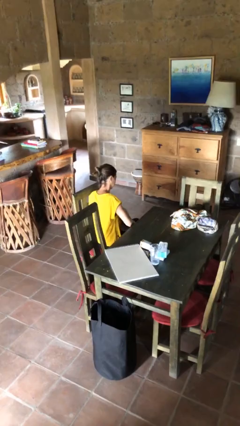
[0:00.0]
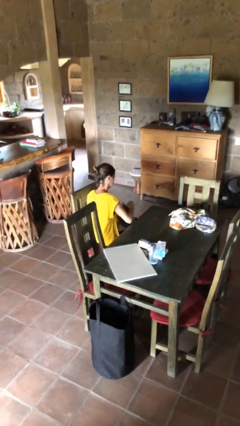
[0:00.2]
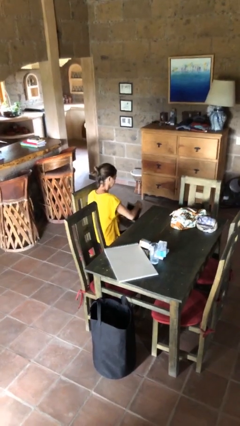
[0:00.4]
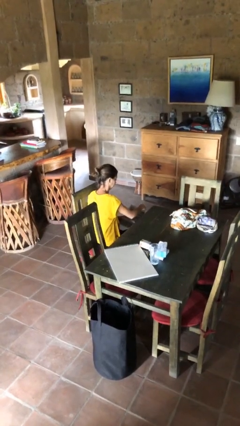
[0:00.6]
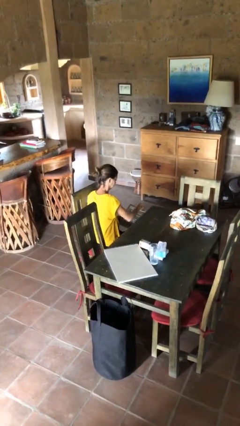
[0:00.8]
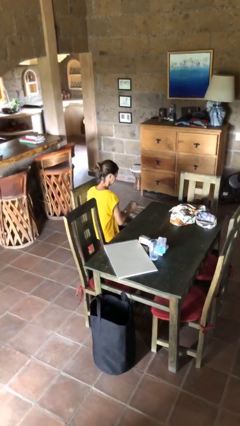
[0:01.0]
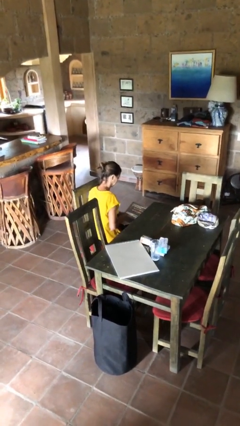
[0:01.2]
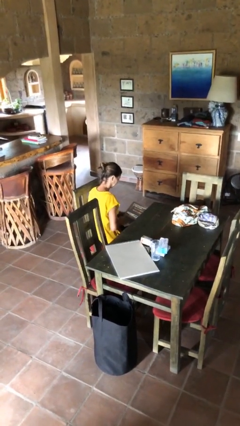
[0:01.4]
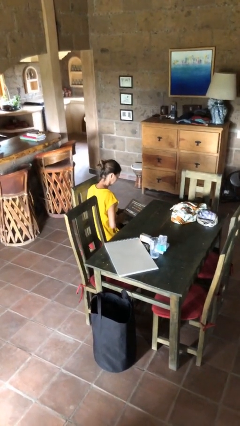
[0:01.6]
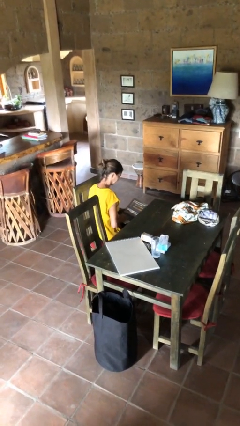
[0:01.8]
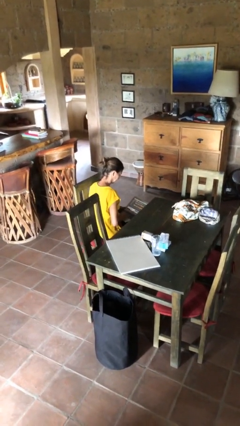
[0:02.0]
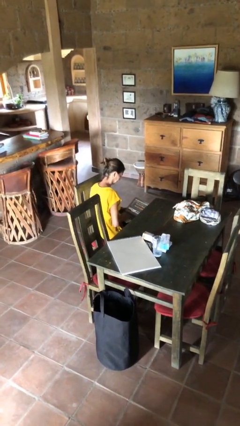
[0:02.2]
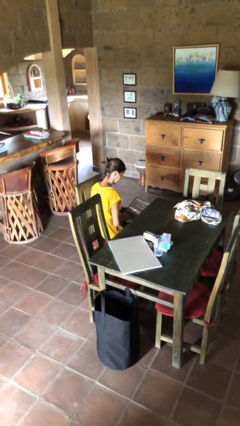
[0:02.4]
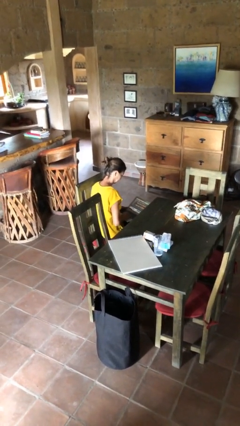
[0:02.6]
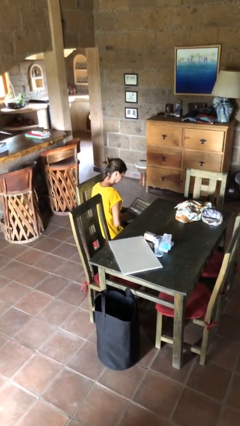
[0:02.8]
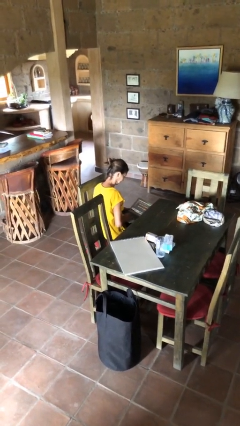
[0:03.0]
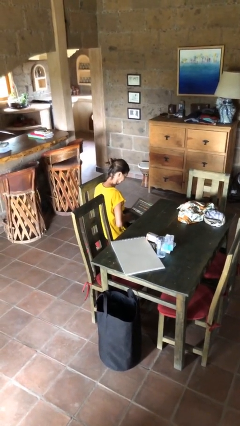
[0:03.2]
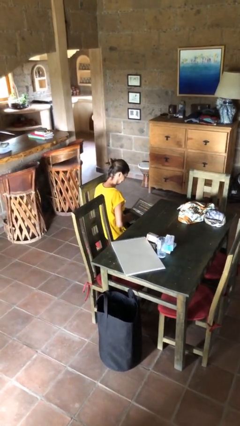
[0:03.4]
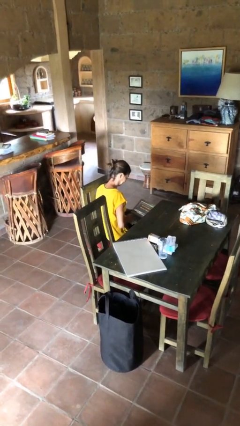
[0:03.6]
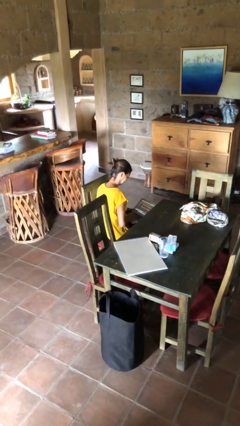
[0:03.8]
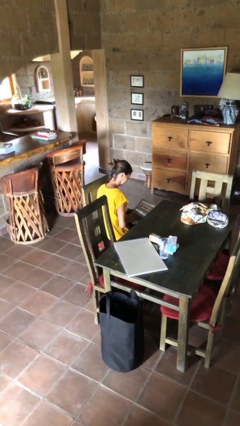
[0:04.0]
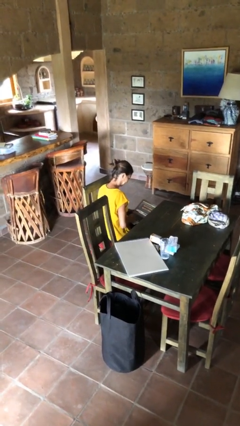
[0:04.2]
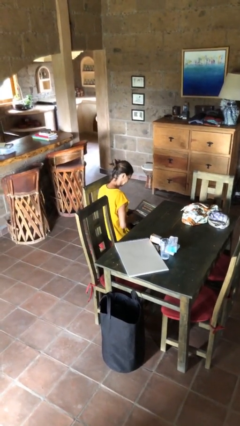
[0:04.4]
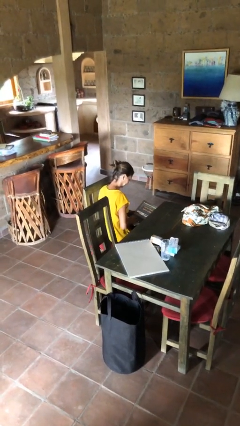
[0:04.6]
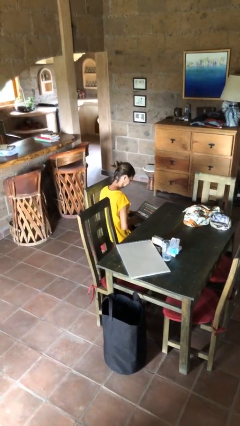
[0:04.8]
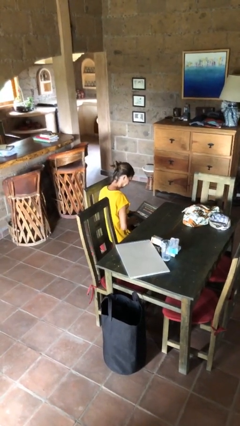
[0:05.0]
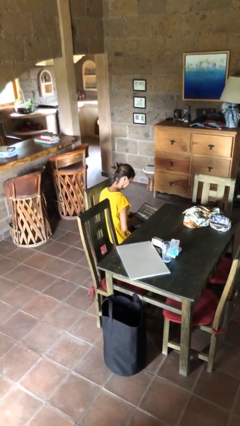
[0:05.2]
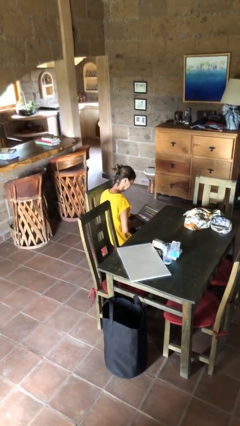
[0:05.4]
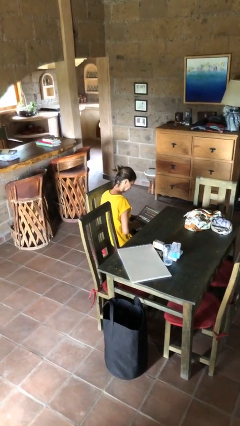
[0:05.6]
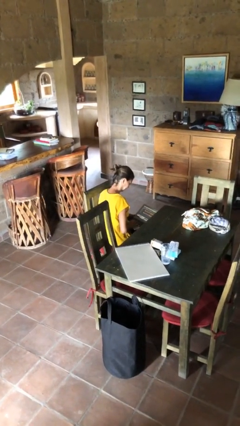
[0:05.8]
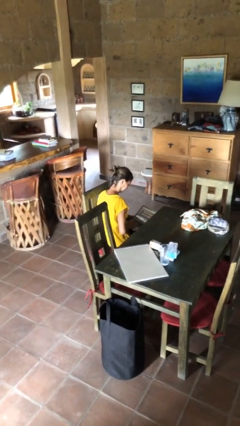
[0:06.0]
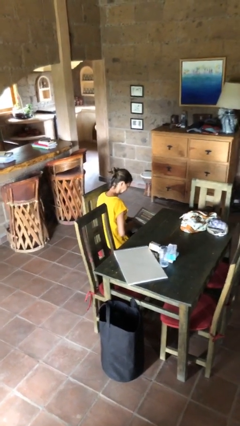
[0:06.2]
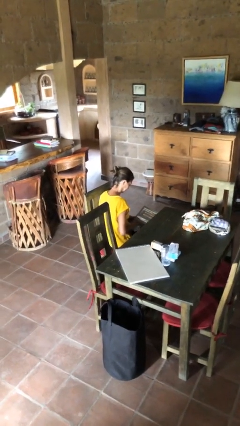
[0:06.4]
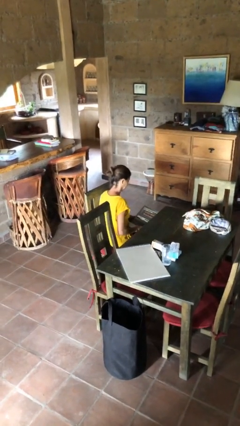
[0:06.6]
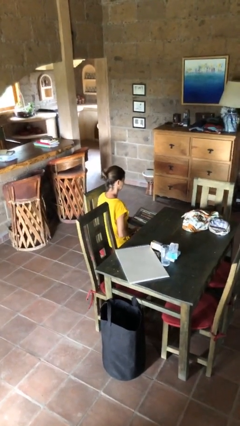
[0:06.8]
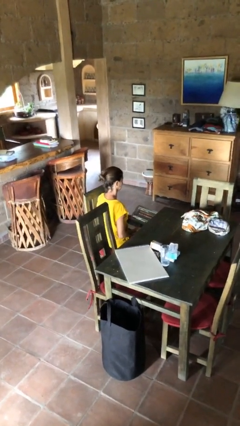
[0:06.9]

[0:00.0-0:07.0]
person interacts with laptop

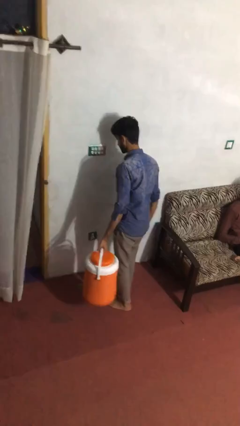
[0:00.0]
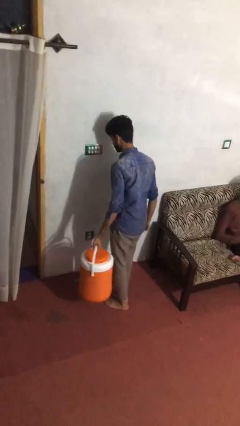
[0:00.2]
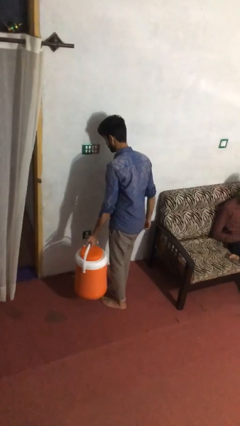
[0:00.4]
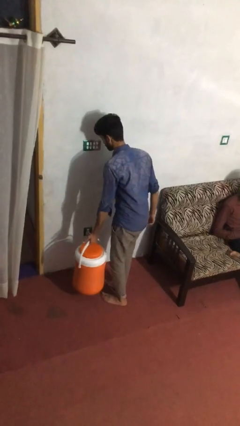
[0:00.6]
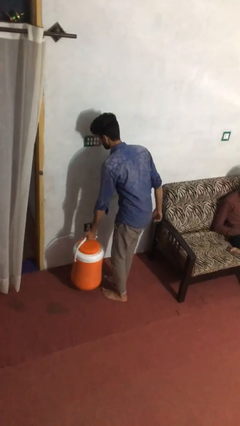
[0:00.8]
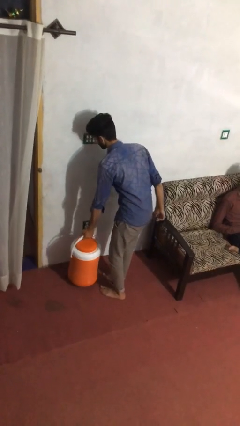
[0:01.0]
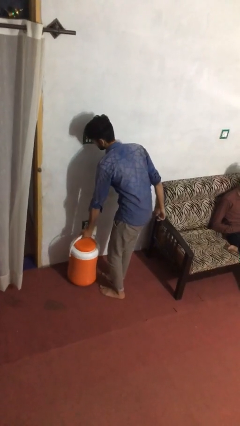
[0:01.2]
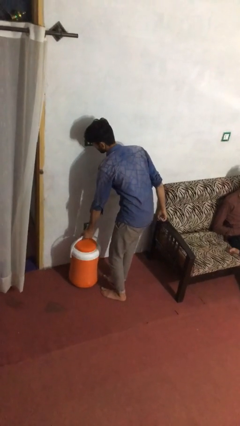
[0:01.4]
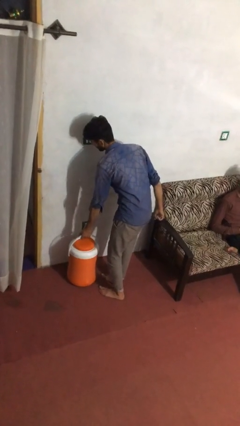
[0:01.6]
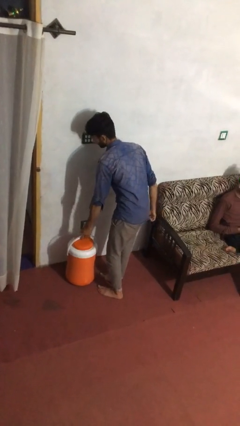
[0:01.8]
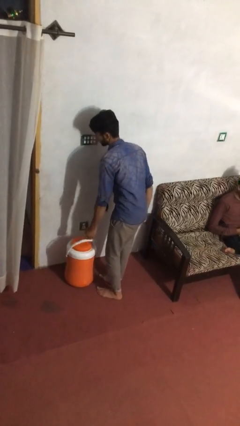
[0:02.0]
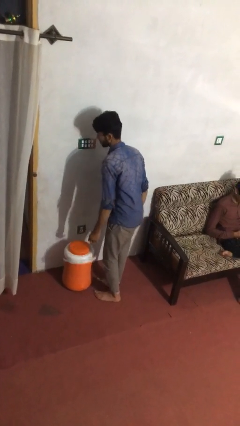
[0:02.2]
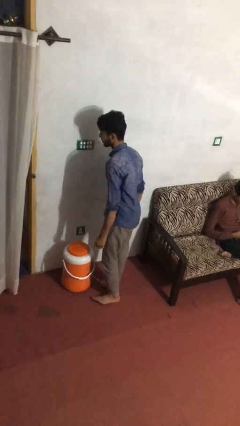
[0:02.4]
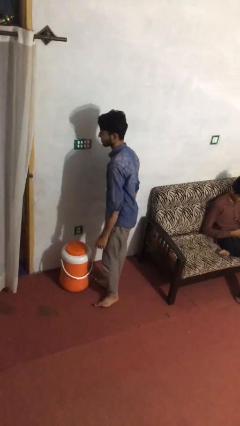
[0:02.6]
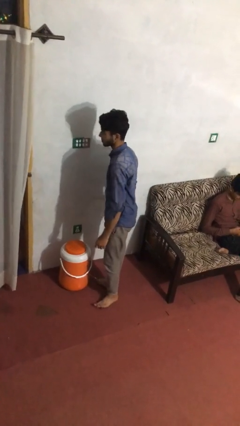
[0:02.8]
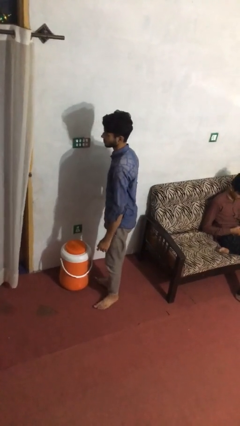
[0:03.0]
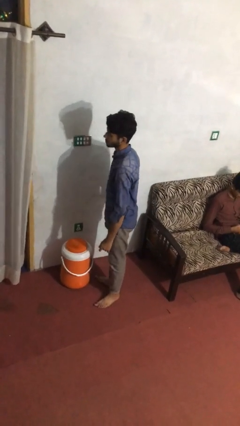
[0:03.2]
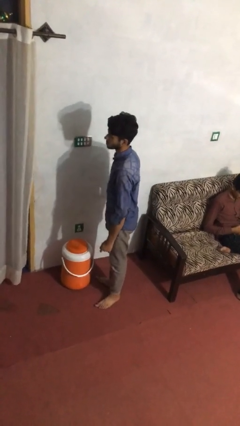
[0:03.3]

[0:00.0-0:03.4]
person puts down object on floor

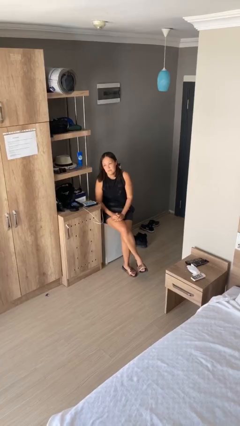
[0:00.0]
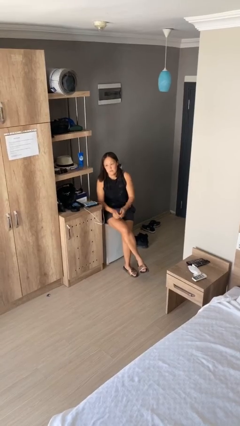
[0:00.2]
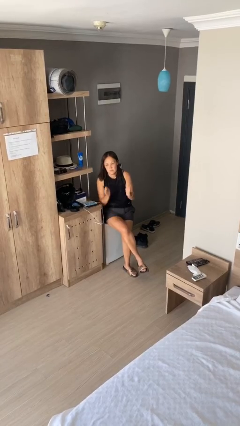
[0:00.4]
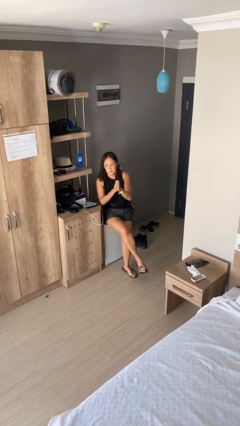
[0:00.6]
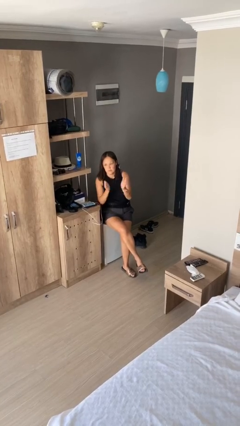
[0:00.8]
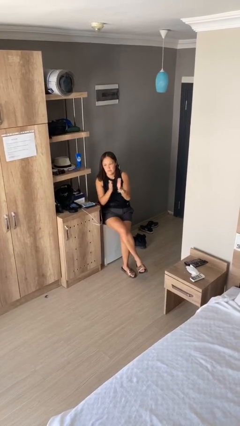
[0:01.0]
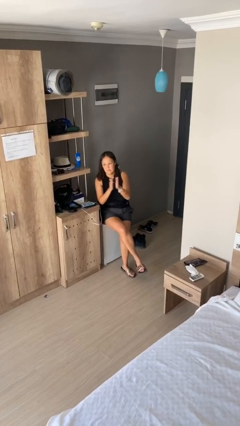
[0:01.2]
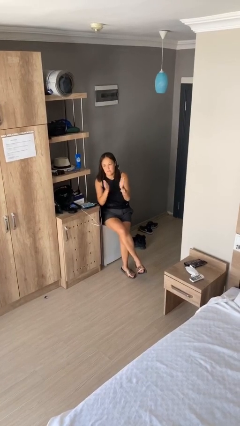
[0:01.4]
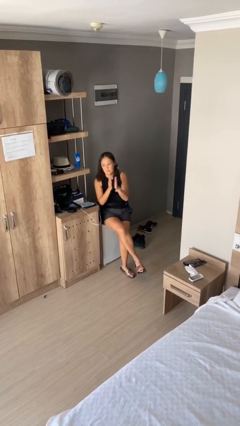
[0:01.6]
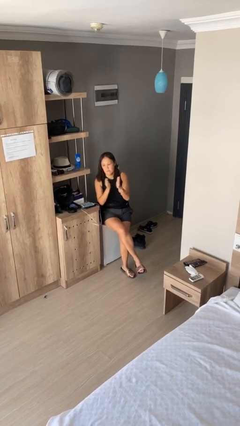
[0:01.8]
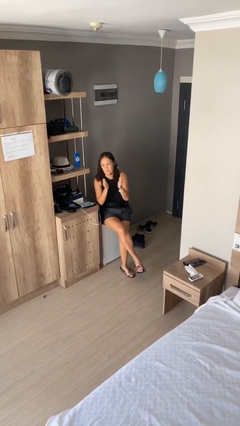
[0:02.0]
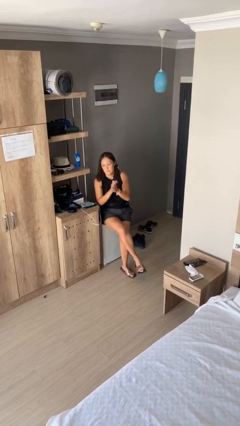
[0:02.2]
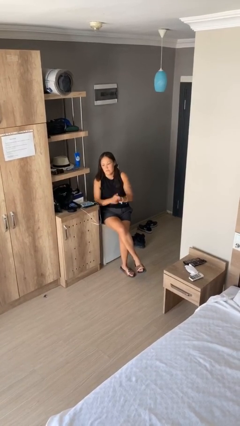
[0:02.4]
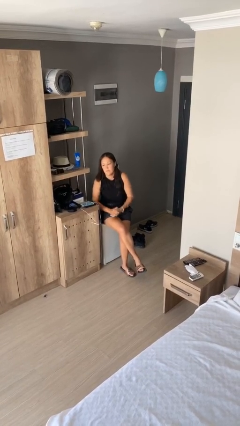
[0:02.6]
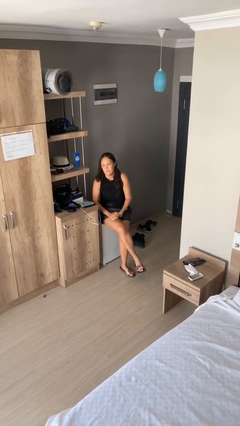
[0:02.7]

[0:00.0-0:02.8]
person claps hands

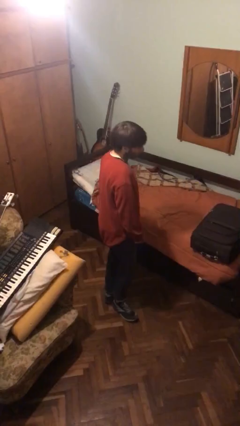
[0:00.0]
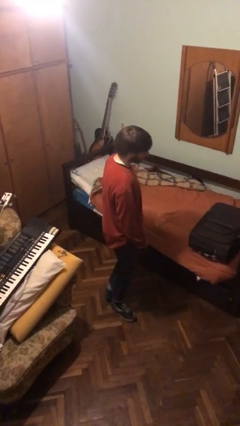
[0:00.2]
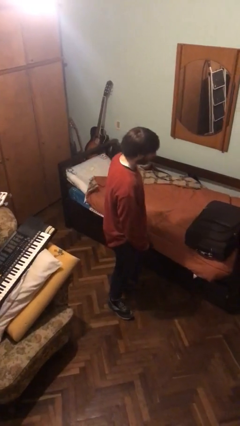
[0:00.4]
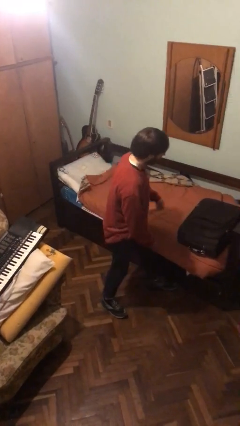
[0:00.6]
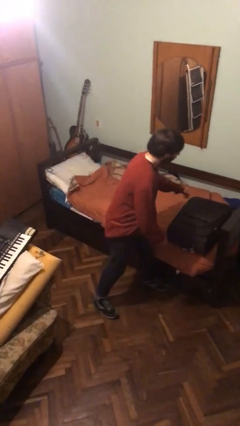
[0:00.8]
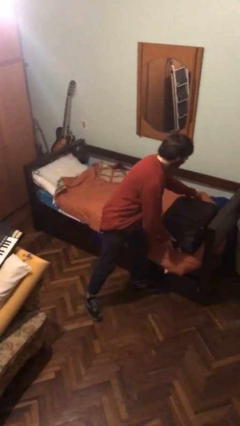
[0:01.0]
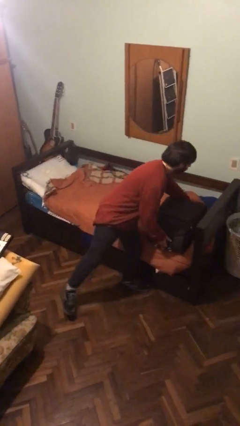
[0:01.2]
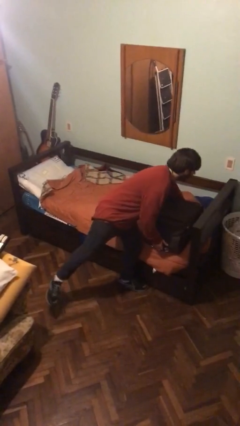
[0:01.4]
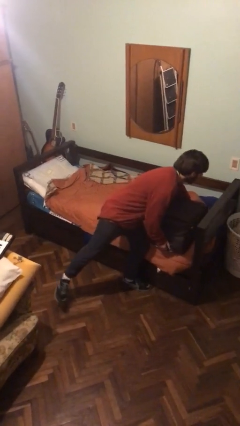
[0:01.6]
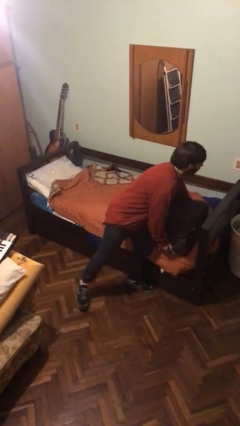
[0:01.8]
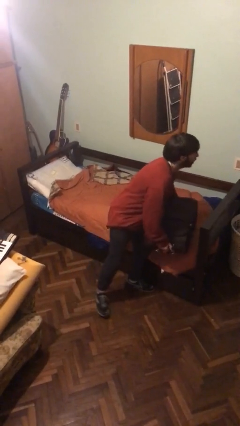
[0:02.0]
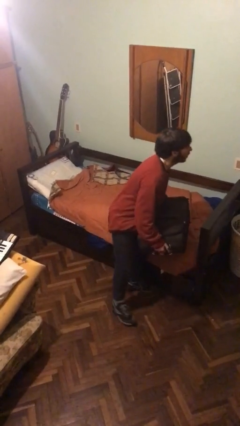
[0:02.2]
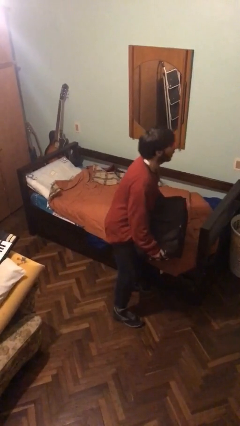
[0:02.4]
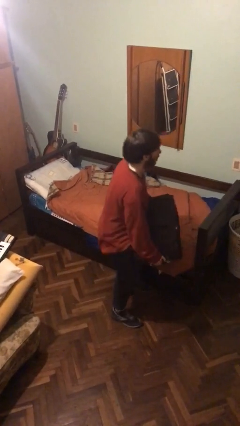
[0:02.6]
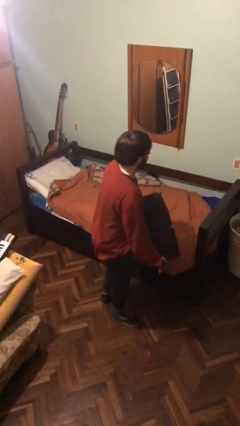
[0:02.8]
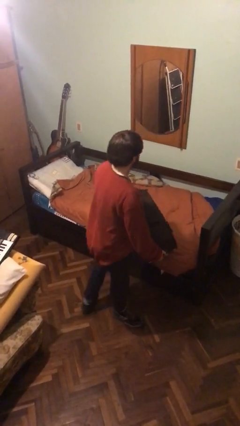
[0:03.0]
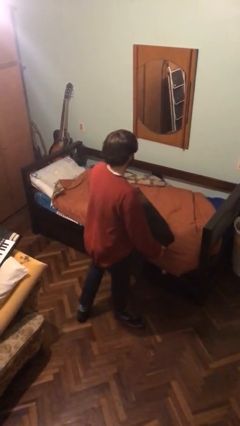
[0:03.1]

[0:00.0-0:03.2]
person picks up object from bed

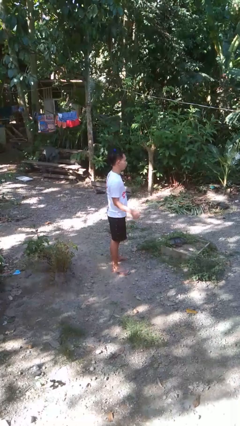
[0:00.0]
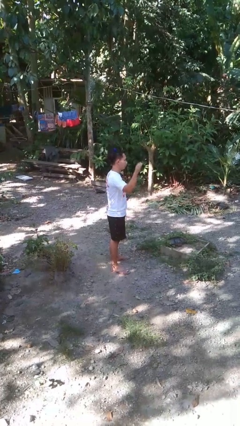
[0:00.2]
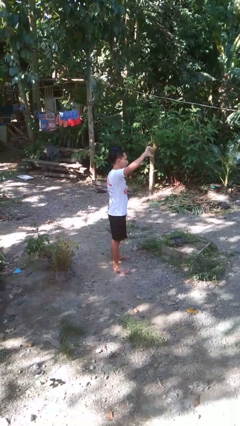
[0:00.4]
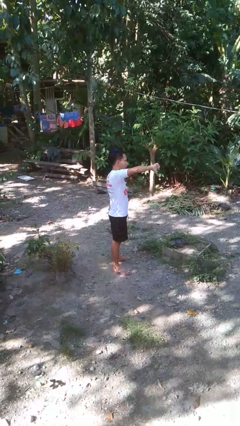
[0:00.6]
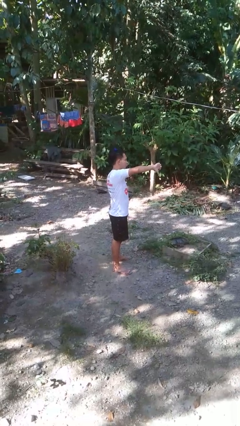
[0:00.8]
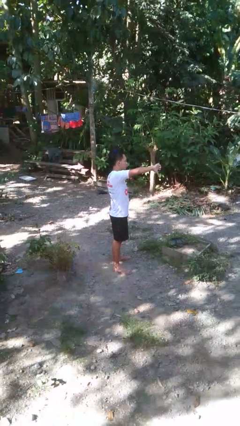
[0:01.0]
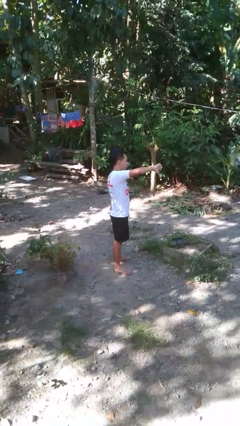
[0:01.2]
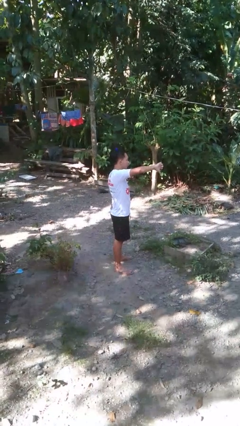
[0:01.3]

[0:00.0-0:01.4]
person gestures thumbs down
